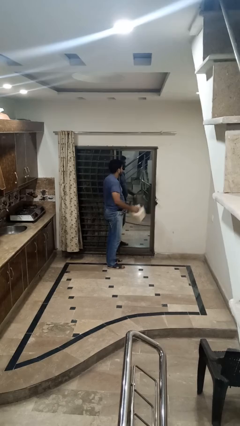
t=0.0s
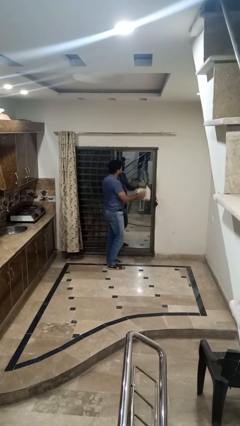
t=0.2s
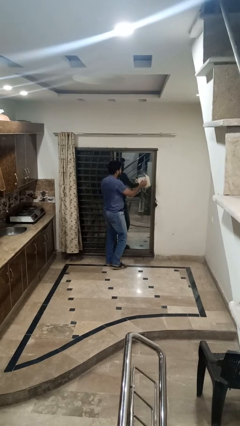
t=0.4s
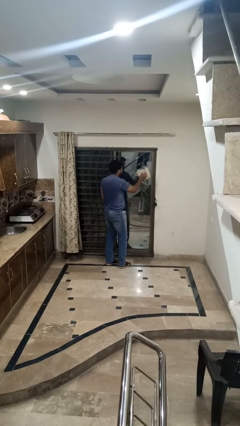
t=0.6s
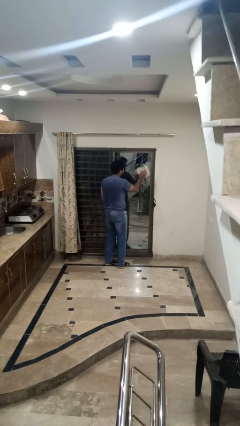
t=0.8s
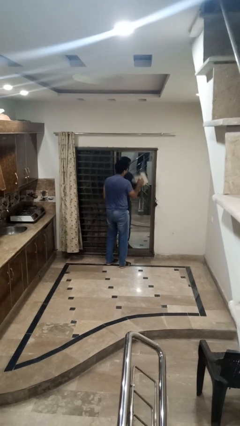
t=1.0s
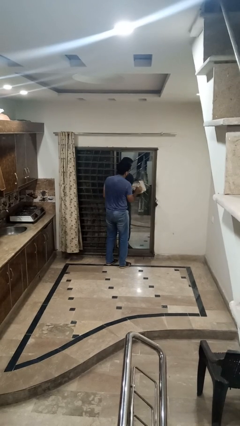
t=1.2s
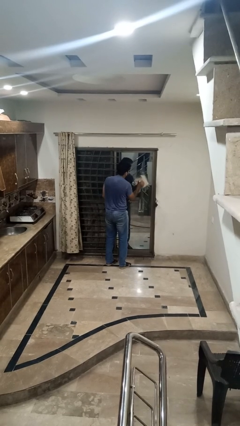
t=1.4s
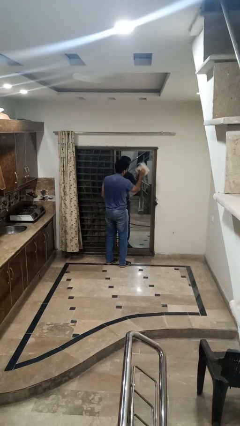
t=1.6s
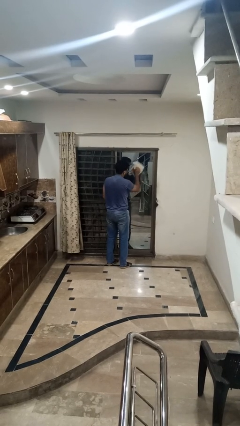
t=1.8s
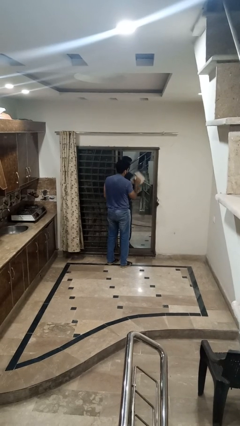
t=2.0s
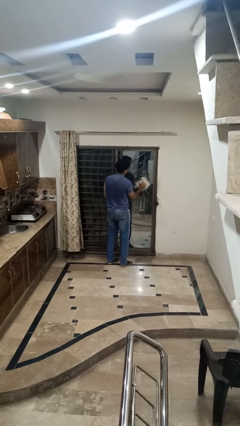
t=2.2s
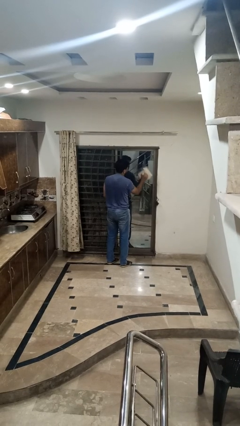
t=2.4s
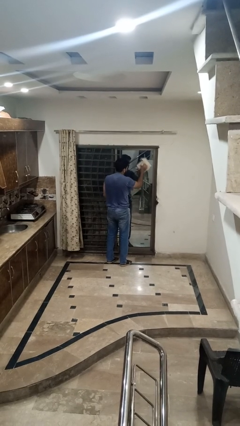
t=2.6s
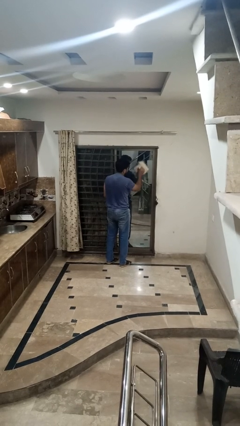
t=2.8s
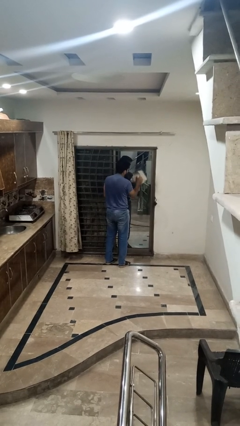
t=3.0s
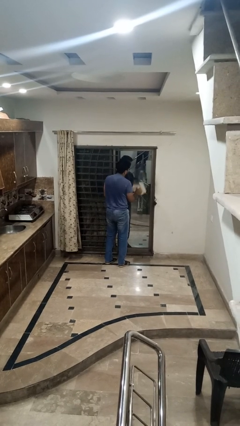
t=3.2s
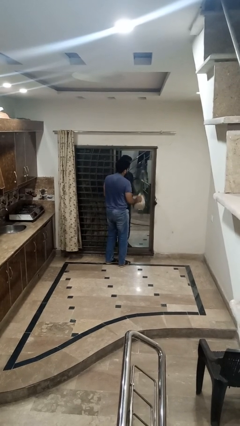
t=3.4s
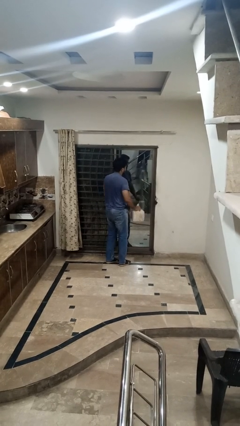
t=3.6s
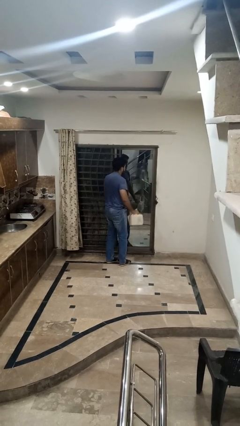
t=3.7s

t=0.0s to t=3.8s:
person washes window

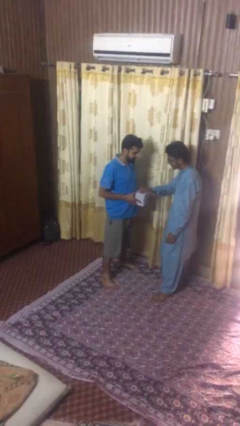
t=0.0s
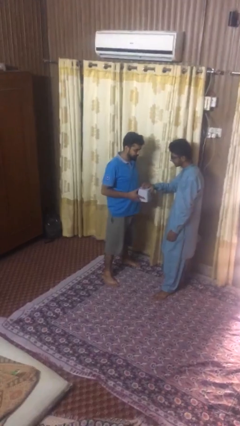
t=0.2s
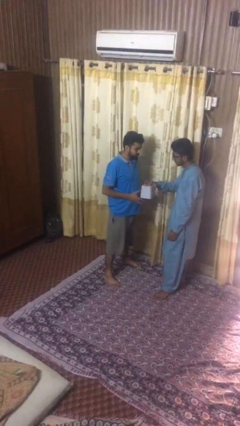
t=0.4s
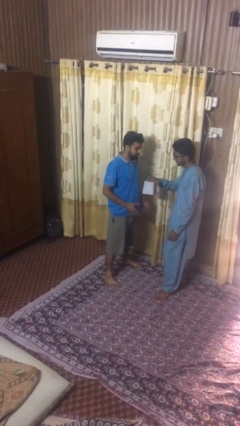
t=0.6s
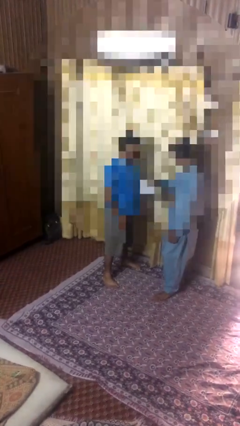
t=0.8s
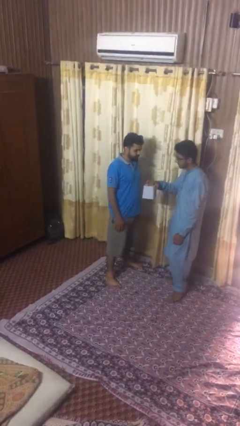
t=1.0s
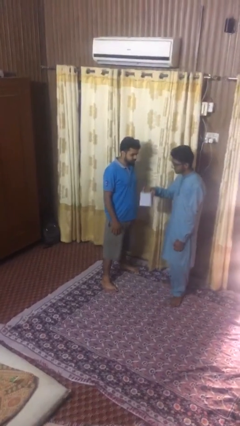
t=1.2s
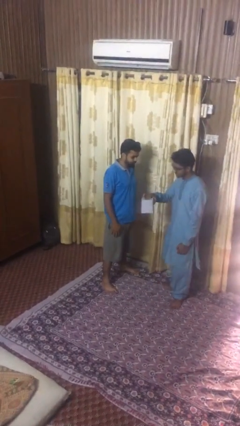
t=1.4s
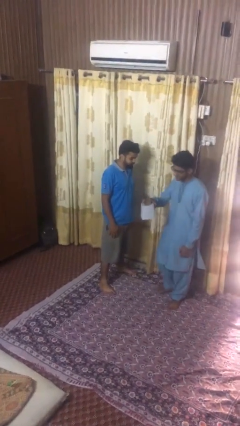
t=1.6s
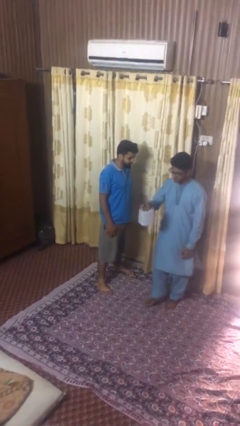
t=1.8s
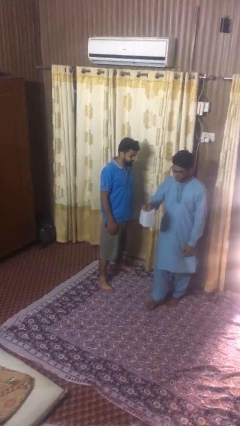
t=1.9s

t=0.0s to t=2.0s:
person transfers object to person

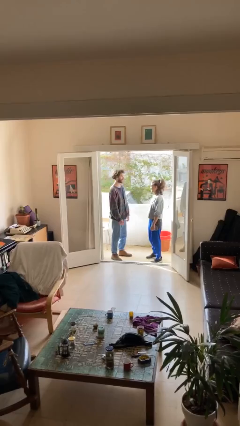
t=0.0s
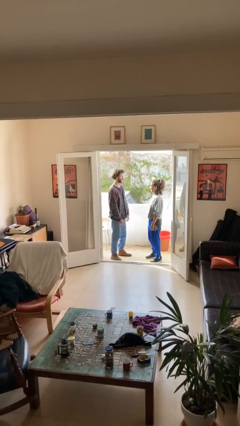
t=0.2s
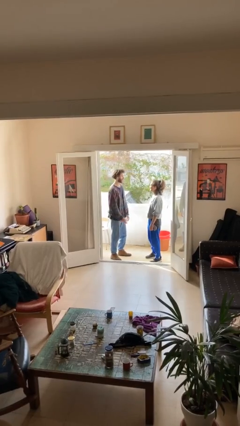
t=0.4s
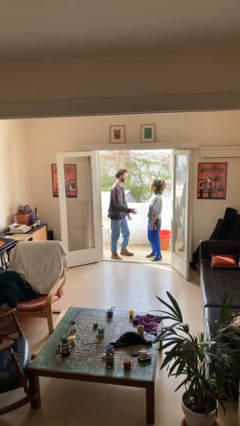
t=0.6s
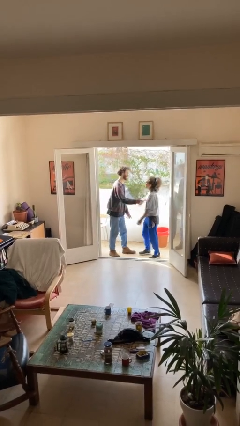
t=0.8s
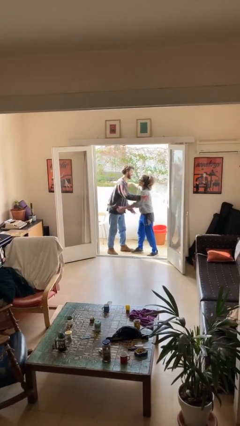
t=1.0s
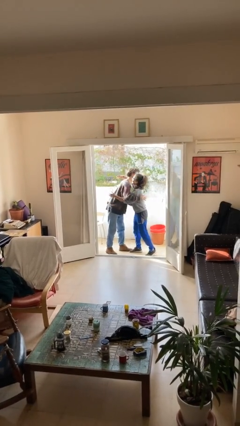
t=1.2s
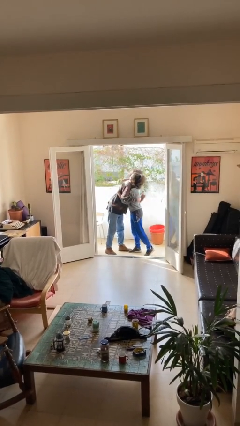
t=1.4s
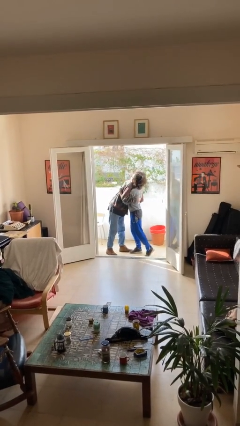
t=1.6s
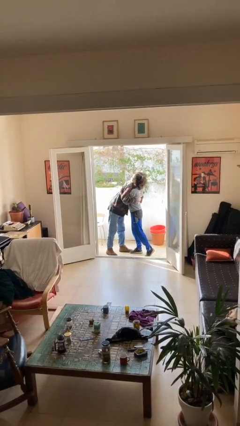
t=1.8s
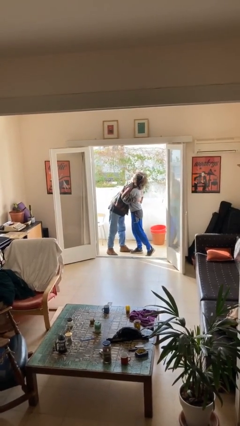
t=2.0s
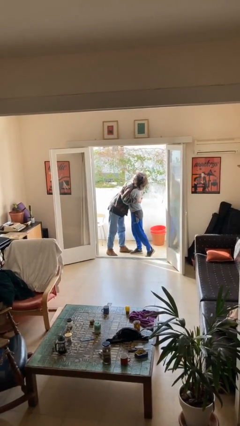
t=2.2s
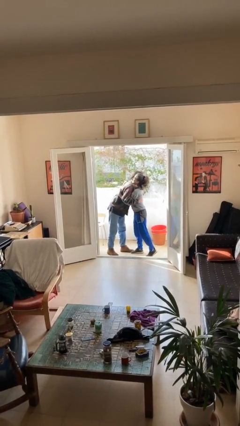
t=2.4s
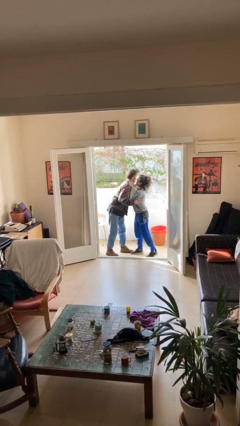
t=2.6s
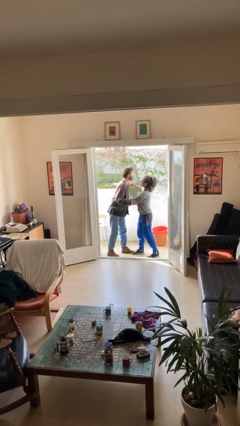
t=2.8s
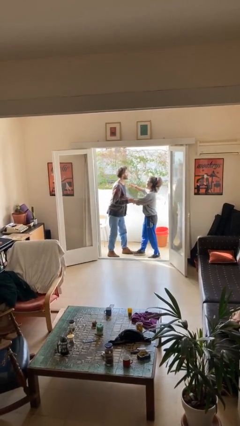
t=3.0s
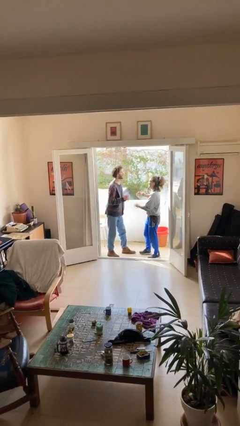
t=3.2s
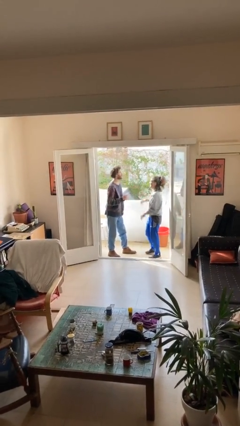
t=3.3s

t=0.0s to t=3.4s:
person embraces person

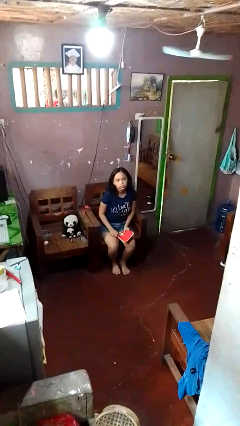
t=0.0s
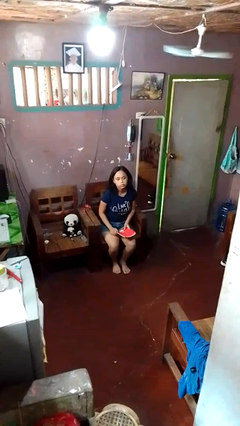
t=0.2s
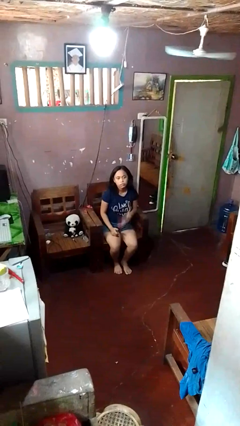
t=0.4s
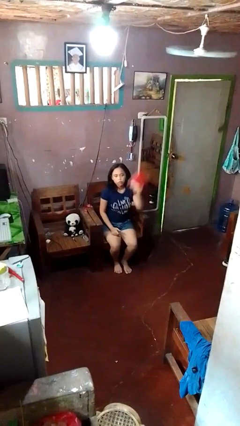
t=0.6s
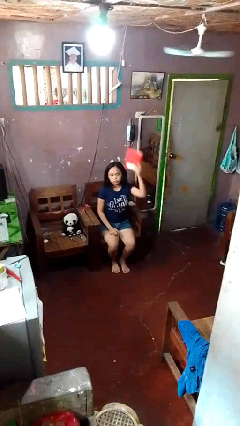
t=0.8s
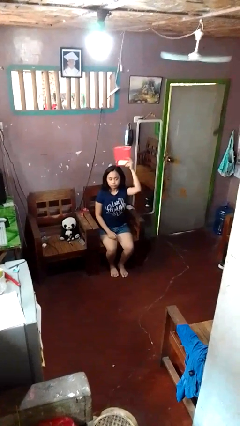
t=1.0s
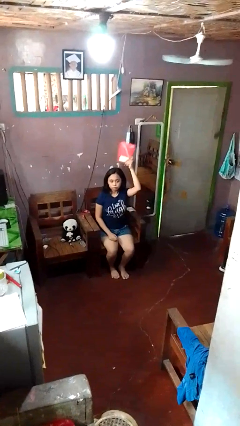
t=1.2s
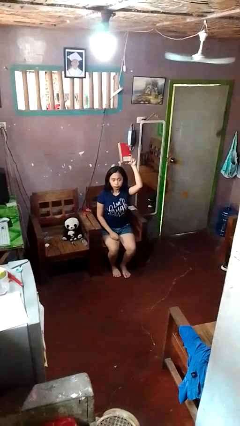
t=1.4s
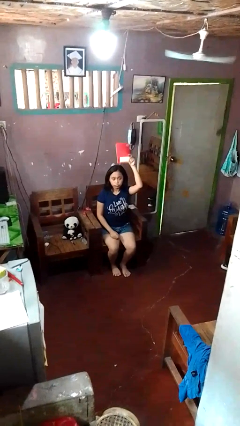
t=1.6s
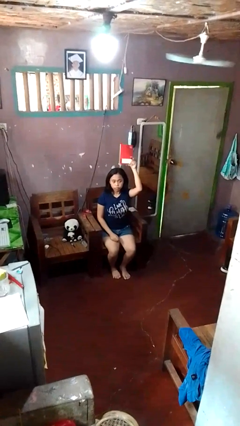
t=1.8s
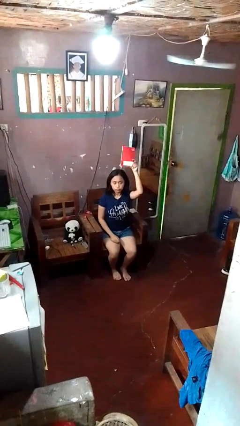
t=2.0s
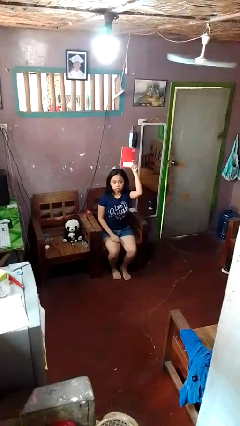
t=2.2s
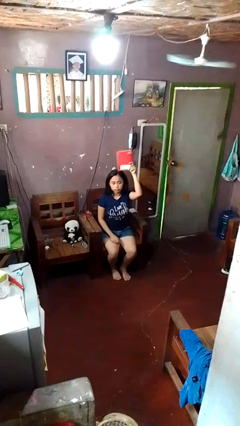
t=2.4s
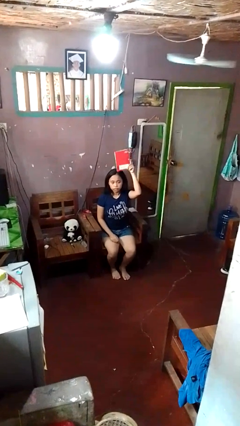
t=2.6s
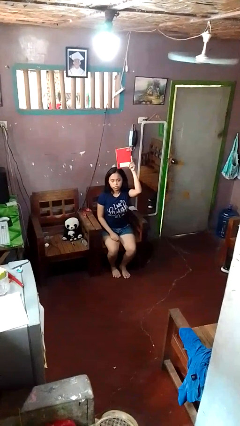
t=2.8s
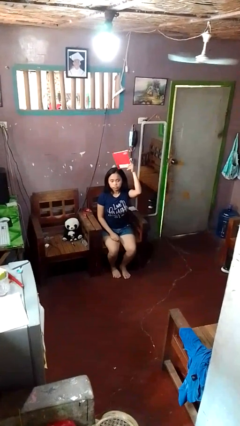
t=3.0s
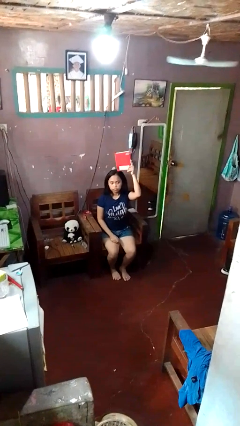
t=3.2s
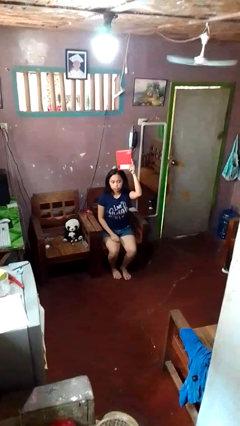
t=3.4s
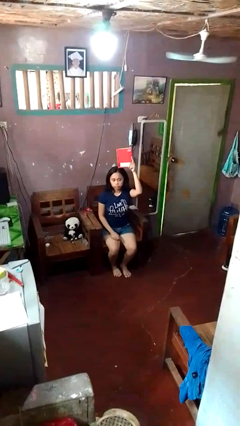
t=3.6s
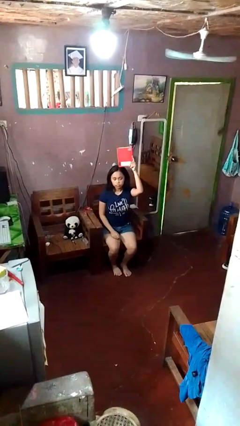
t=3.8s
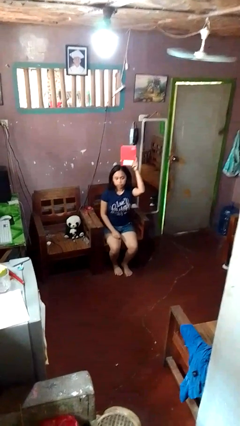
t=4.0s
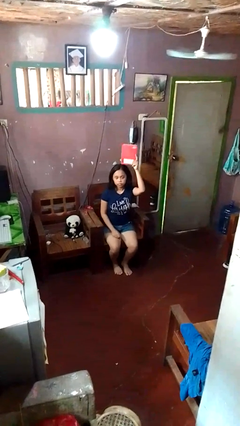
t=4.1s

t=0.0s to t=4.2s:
person holds object above head

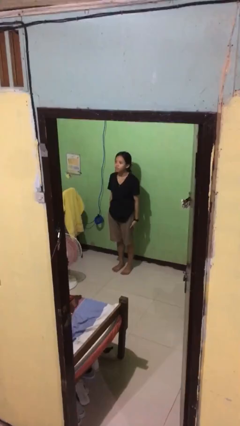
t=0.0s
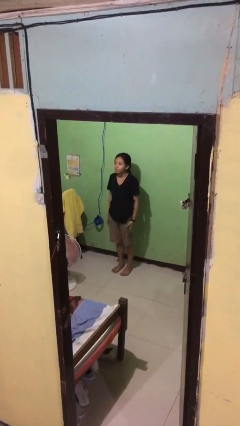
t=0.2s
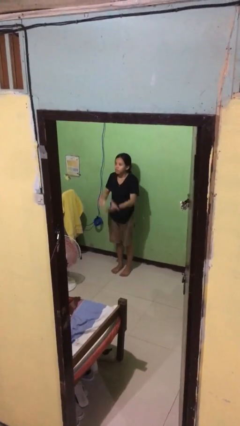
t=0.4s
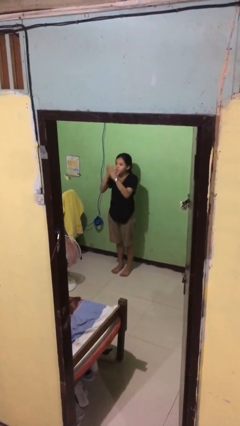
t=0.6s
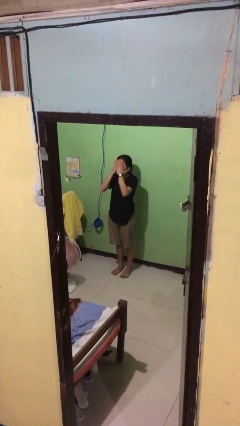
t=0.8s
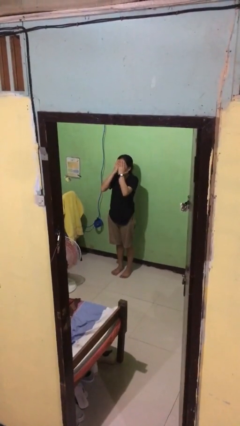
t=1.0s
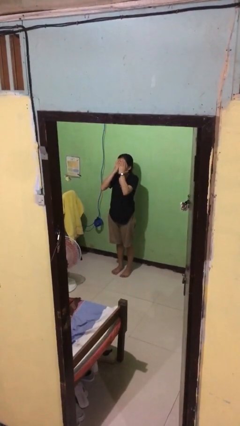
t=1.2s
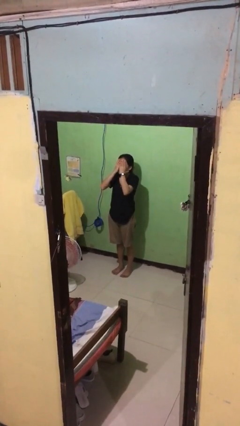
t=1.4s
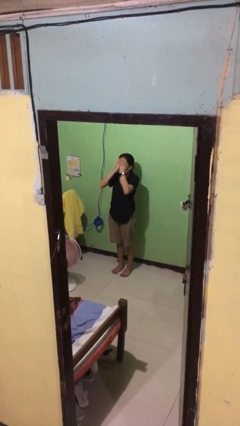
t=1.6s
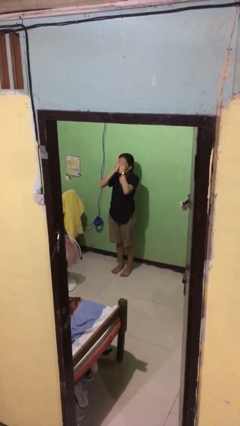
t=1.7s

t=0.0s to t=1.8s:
person covers face with hands

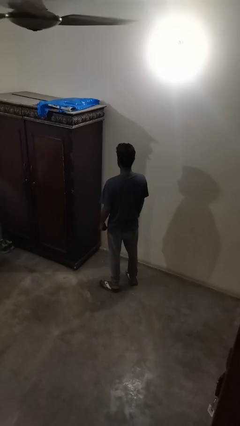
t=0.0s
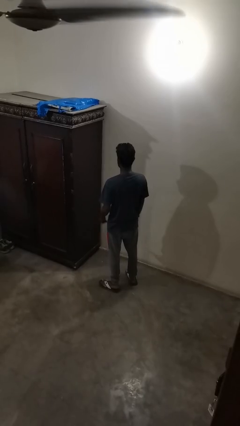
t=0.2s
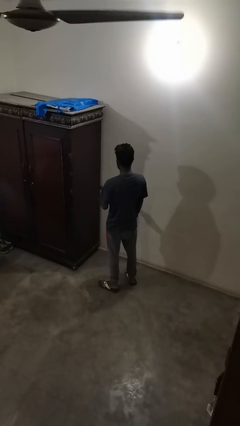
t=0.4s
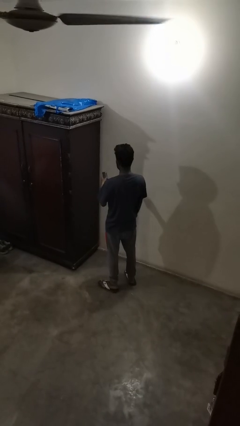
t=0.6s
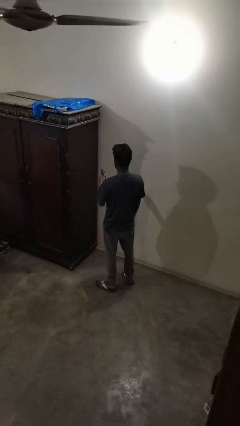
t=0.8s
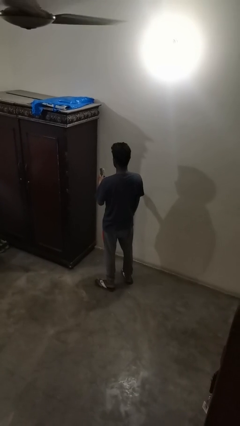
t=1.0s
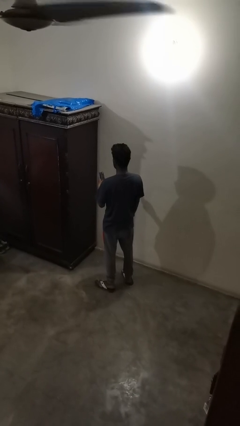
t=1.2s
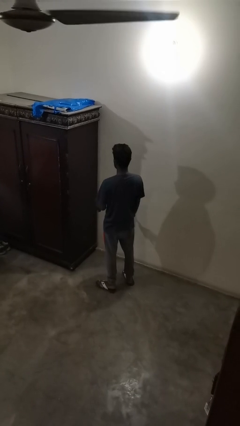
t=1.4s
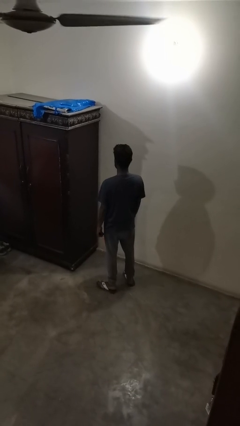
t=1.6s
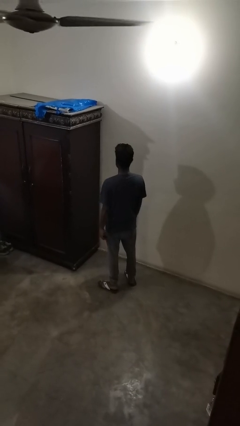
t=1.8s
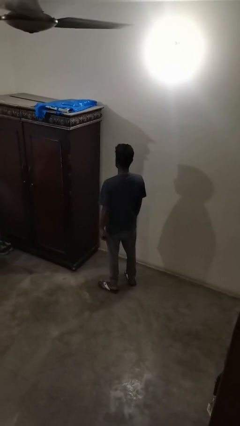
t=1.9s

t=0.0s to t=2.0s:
person uses television remote

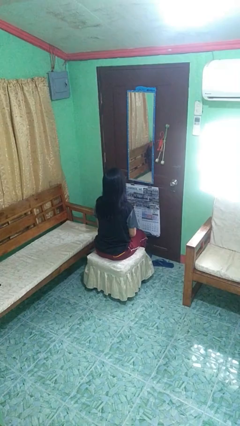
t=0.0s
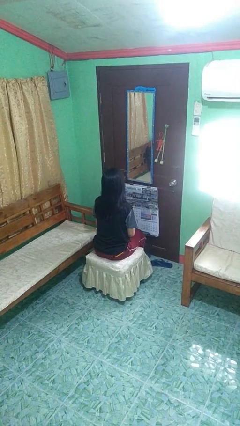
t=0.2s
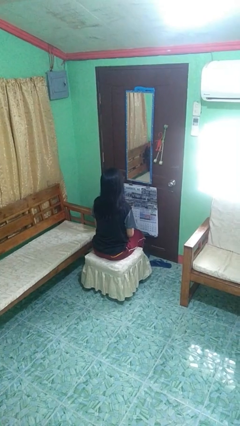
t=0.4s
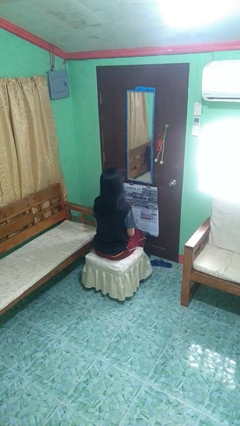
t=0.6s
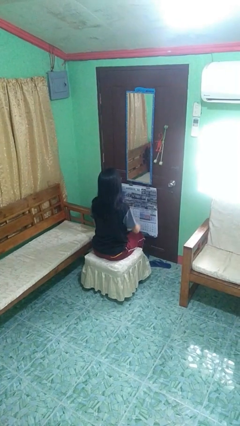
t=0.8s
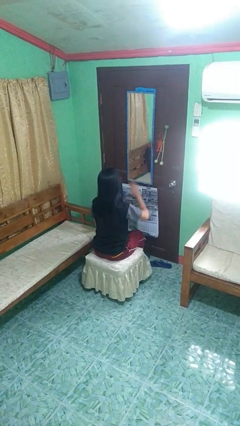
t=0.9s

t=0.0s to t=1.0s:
person gestures swipe up
